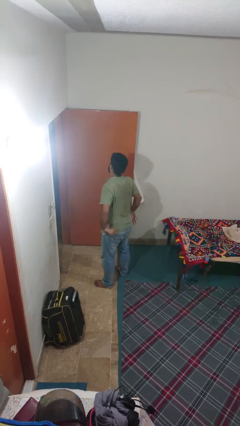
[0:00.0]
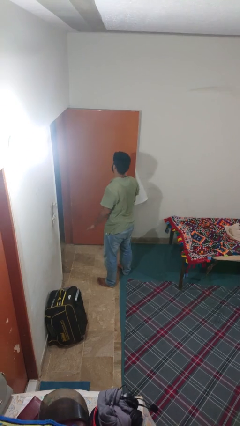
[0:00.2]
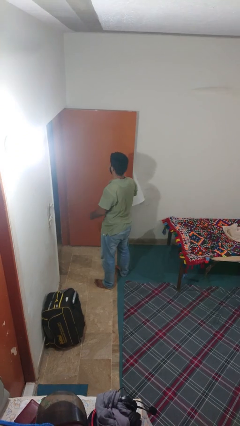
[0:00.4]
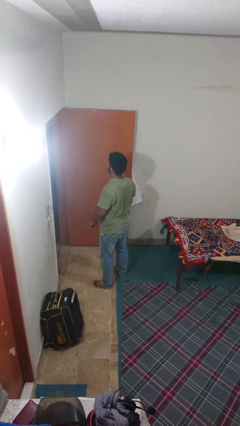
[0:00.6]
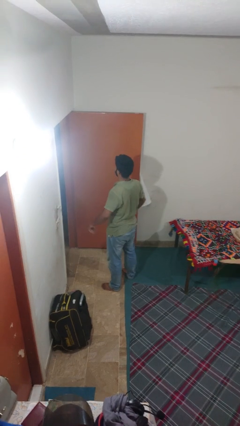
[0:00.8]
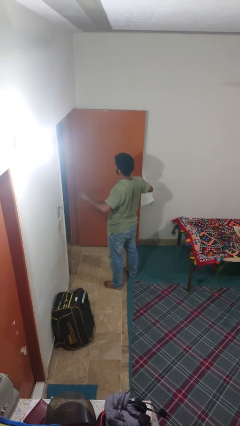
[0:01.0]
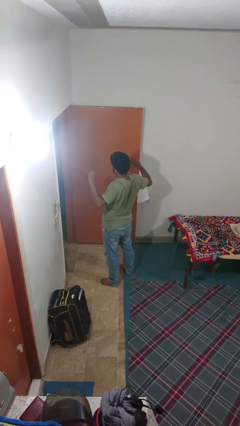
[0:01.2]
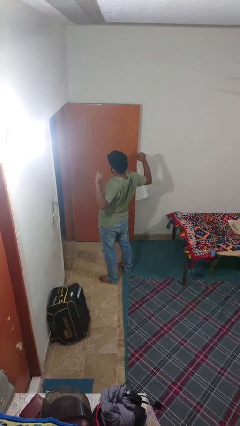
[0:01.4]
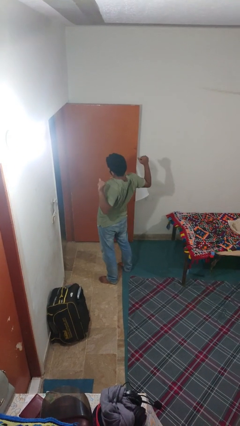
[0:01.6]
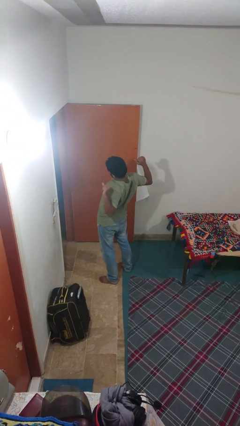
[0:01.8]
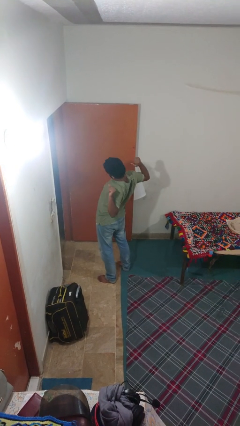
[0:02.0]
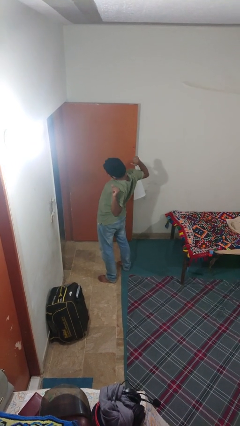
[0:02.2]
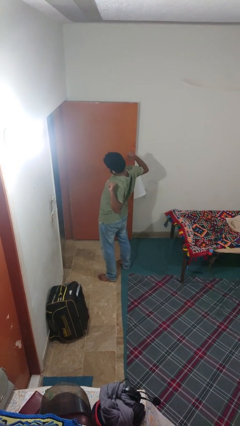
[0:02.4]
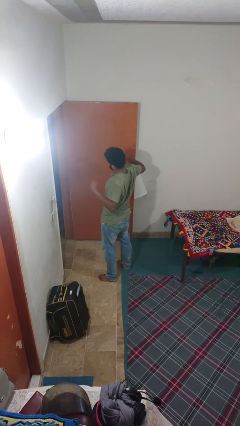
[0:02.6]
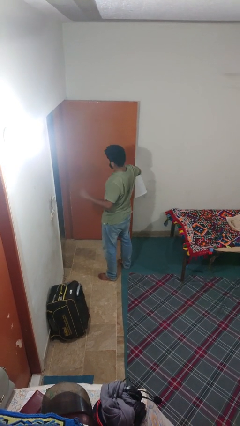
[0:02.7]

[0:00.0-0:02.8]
person stretches arms to side

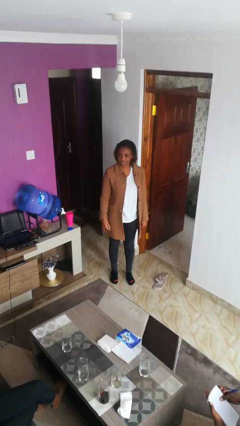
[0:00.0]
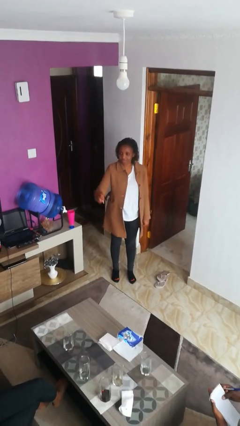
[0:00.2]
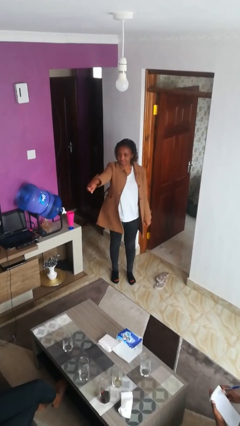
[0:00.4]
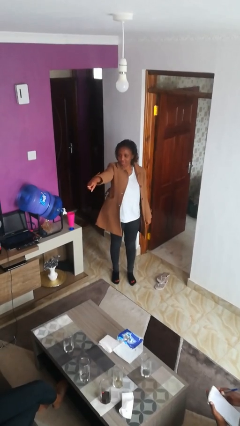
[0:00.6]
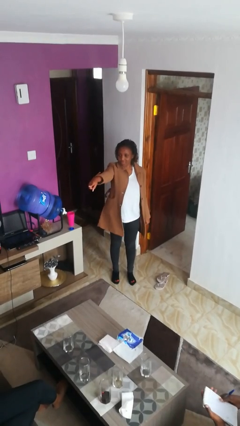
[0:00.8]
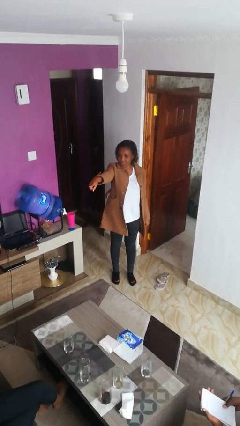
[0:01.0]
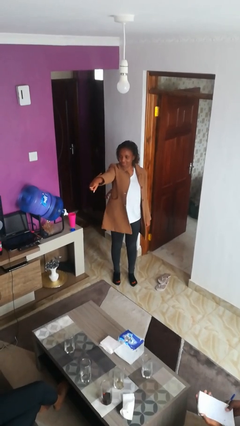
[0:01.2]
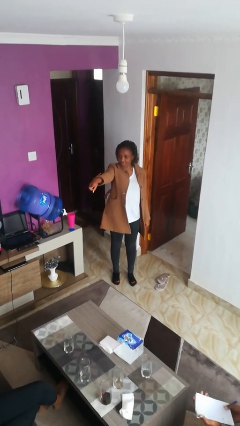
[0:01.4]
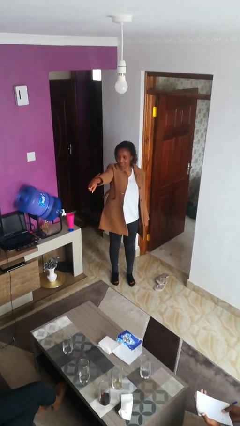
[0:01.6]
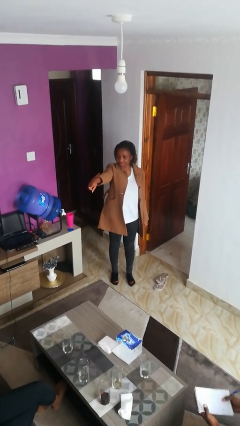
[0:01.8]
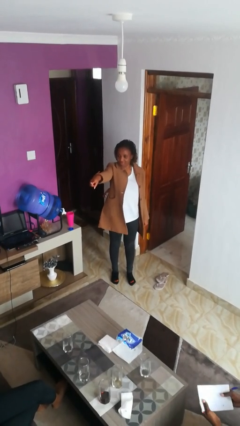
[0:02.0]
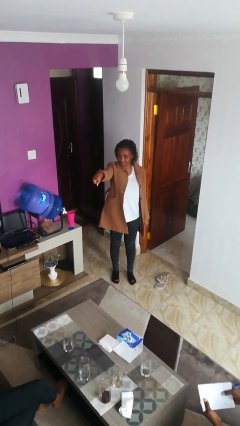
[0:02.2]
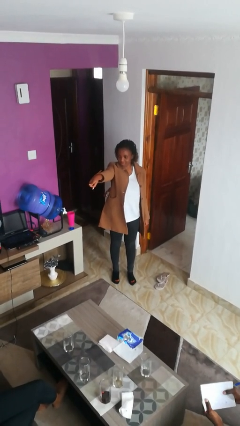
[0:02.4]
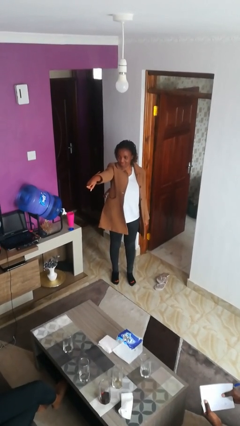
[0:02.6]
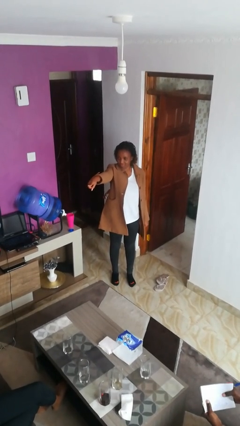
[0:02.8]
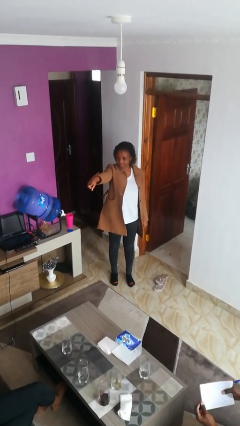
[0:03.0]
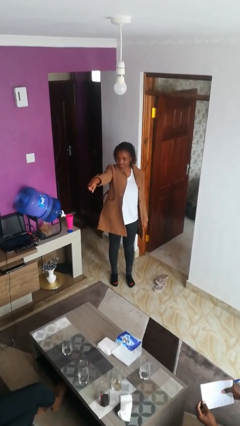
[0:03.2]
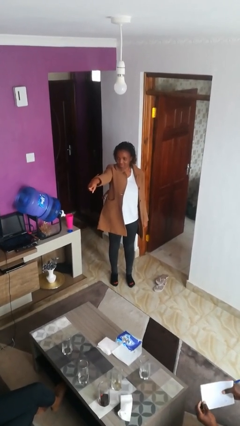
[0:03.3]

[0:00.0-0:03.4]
person points at person

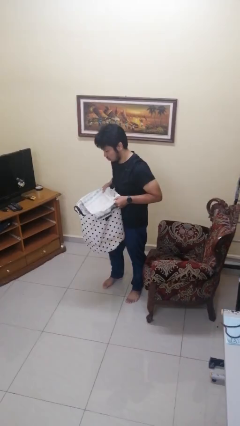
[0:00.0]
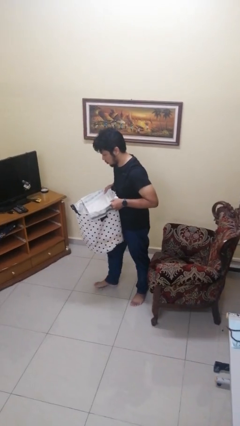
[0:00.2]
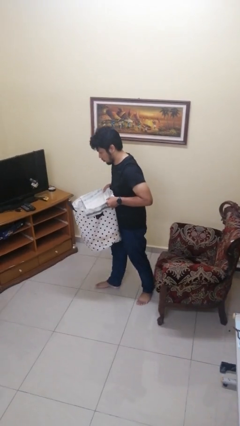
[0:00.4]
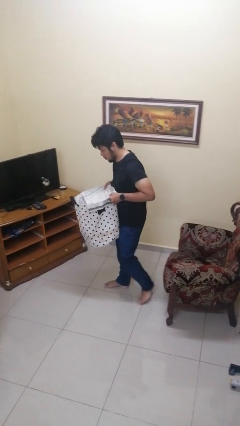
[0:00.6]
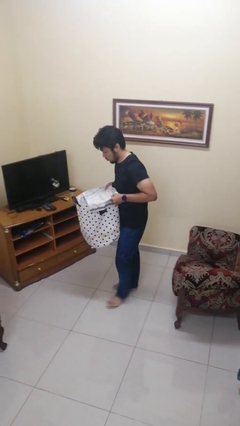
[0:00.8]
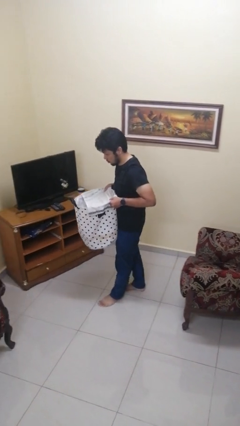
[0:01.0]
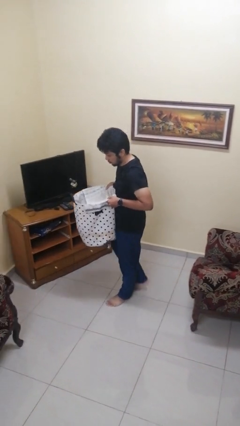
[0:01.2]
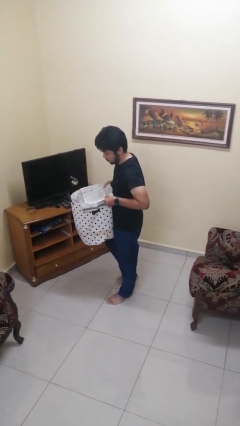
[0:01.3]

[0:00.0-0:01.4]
person carries laundry basket

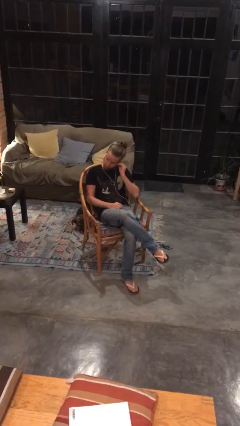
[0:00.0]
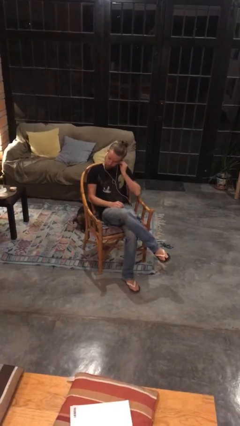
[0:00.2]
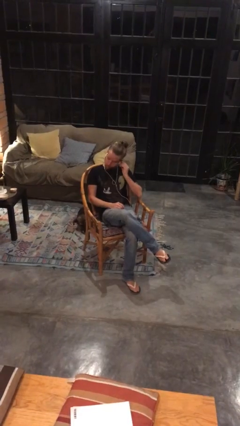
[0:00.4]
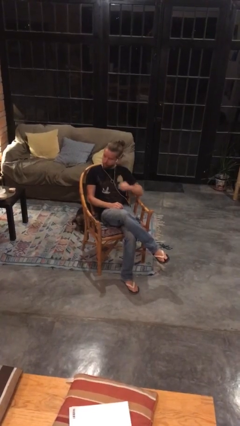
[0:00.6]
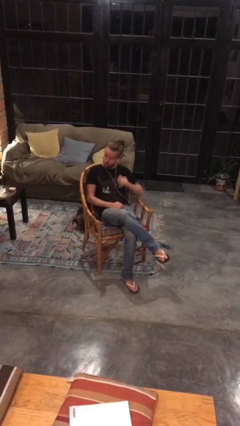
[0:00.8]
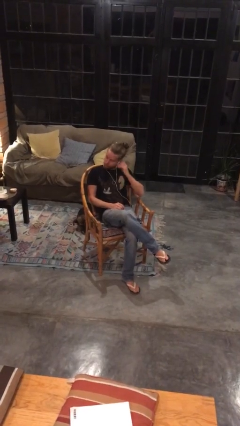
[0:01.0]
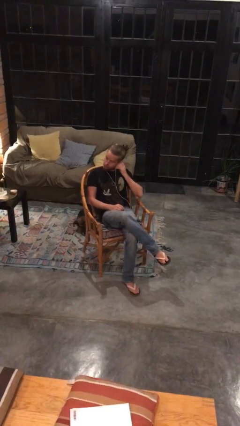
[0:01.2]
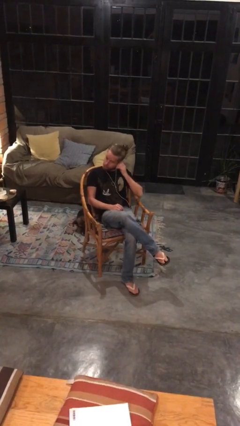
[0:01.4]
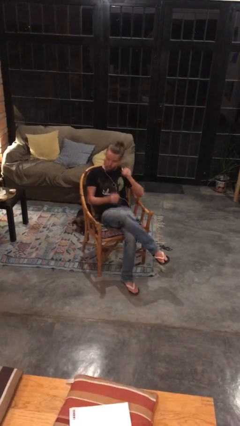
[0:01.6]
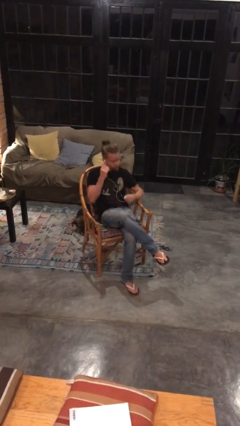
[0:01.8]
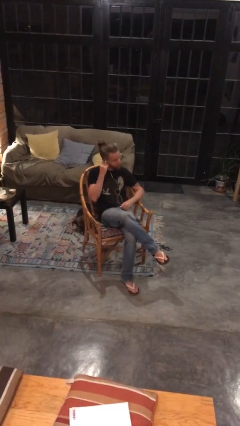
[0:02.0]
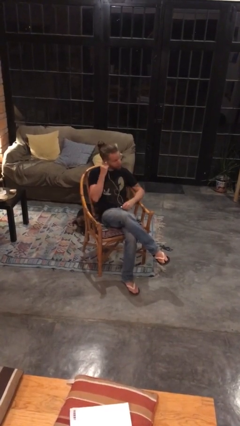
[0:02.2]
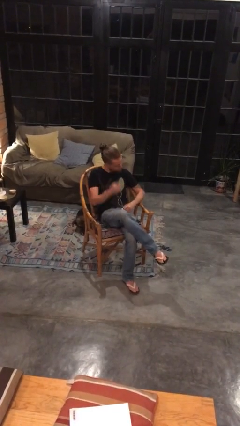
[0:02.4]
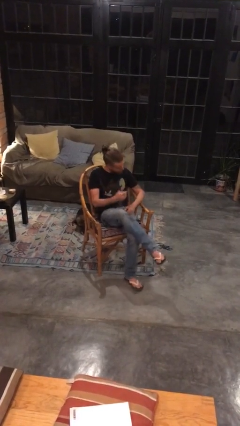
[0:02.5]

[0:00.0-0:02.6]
person takes off headphones

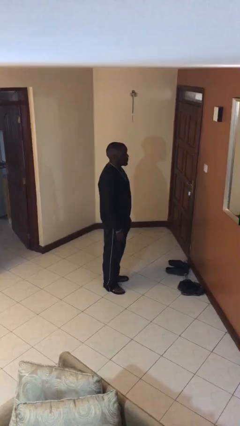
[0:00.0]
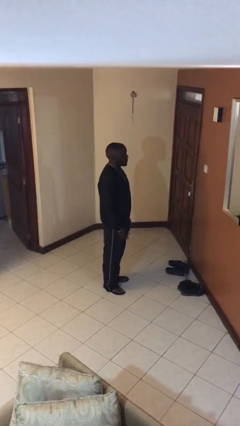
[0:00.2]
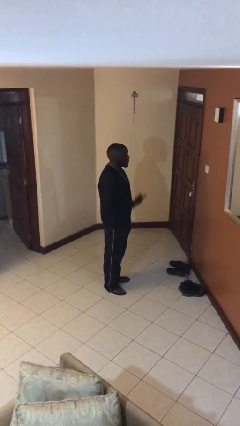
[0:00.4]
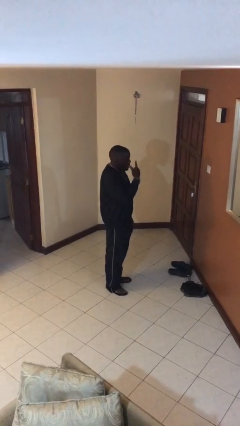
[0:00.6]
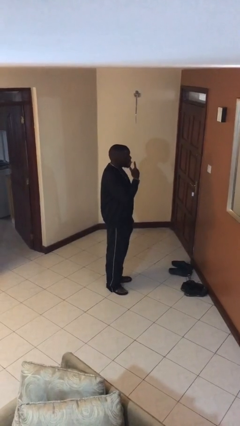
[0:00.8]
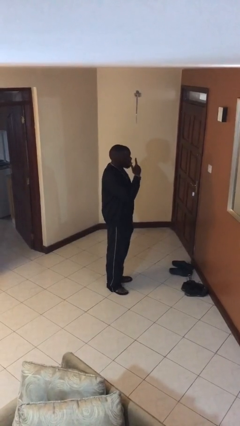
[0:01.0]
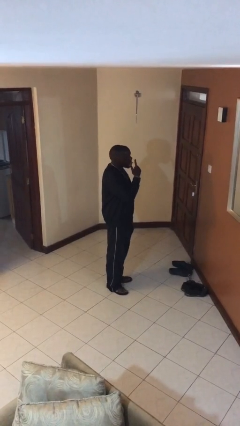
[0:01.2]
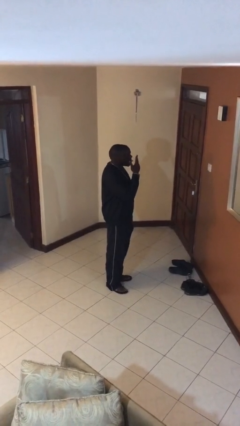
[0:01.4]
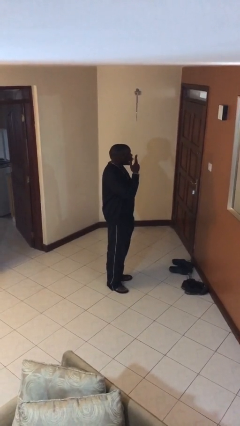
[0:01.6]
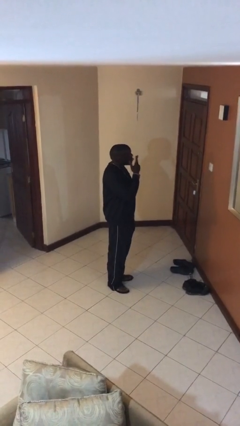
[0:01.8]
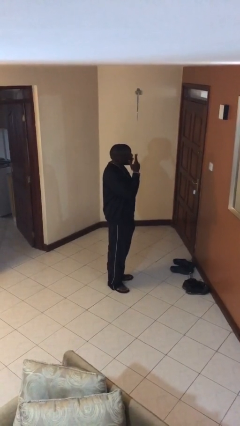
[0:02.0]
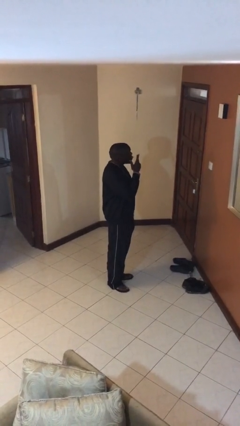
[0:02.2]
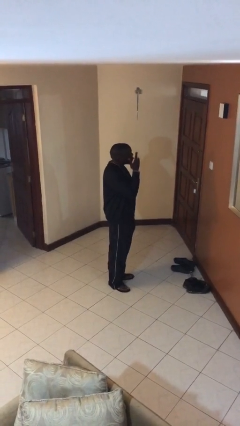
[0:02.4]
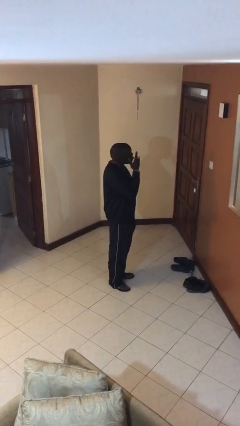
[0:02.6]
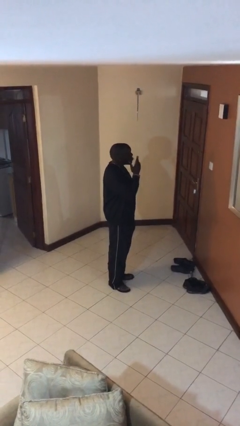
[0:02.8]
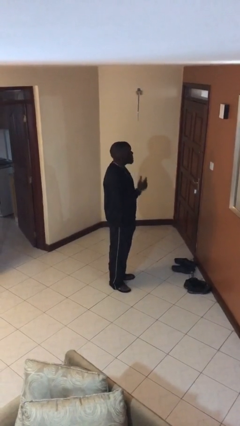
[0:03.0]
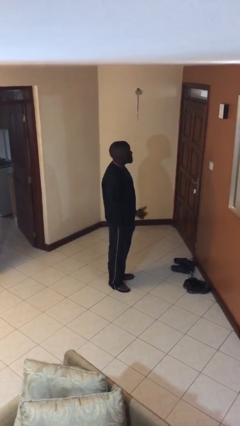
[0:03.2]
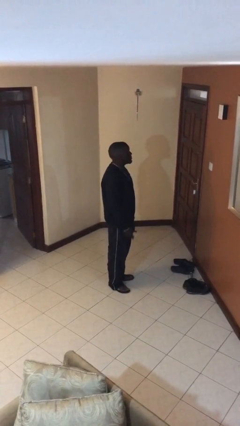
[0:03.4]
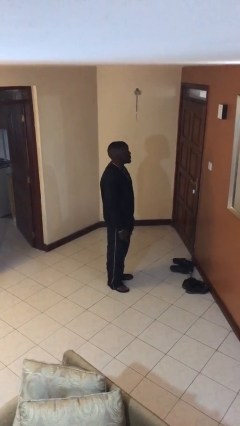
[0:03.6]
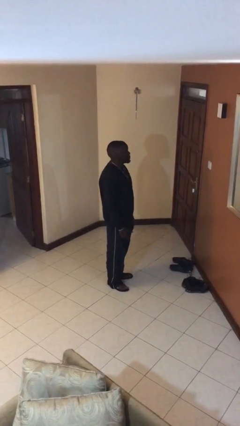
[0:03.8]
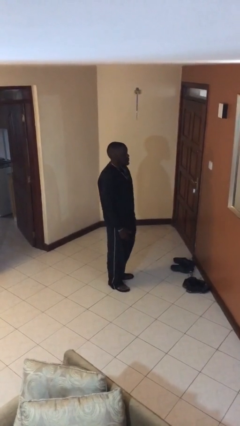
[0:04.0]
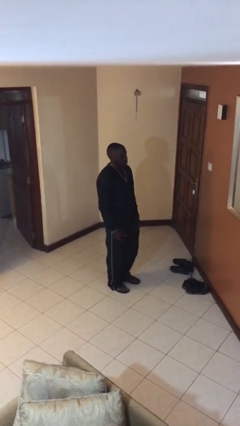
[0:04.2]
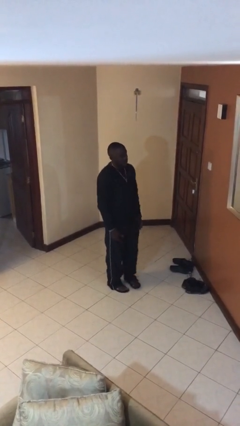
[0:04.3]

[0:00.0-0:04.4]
person licks fingers

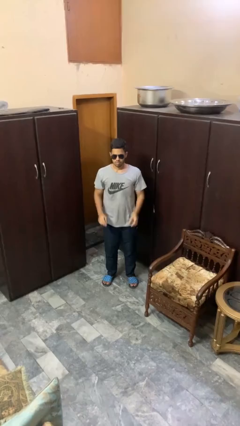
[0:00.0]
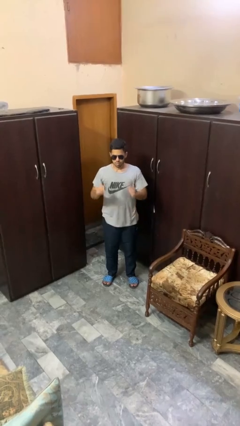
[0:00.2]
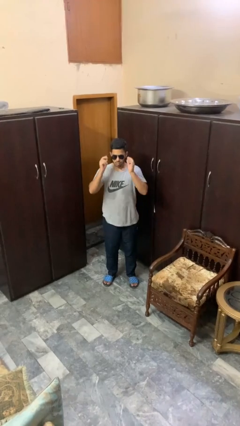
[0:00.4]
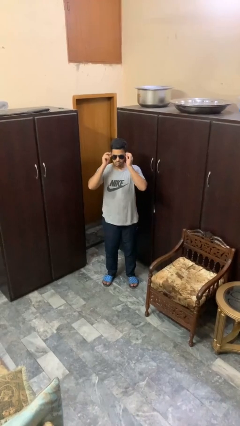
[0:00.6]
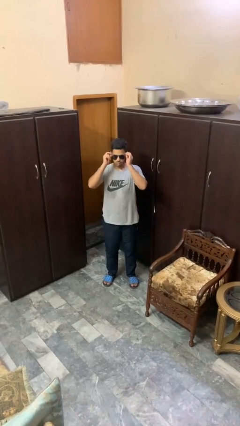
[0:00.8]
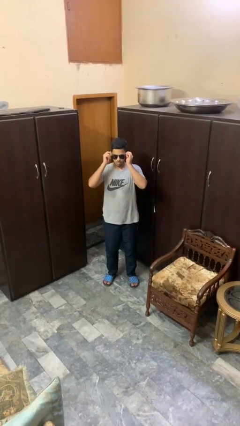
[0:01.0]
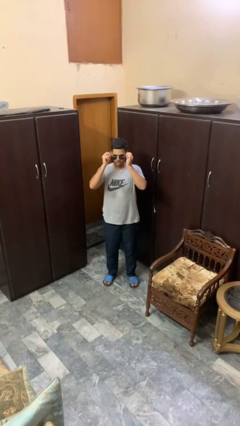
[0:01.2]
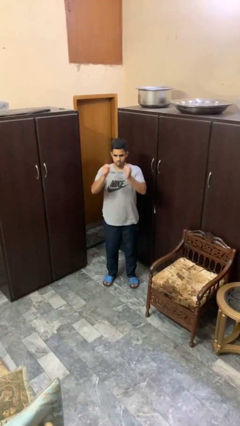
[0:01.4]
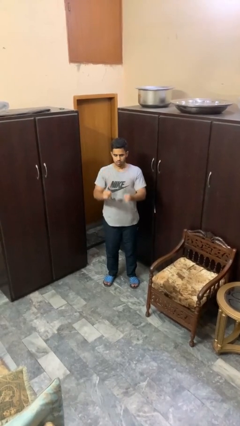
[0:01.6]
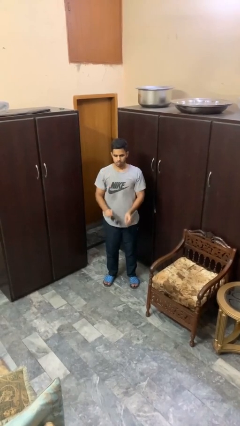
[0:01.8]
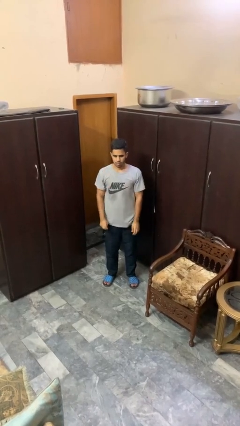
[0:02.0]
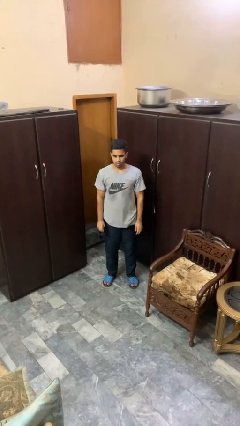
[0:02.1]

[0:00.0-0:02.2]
person takes off sunglasses

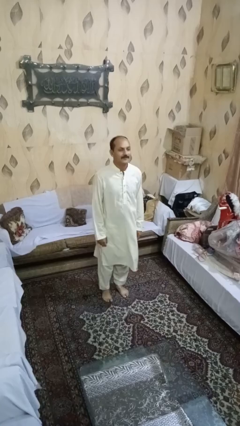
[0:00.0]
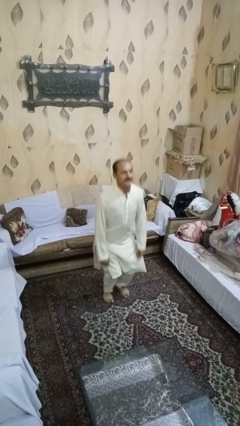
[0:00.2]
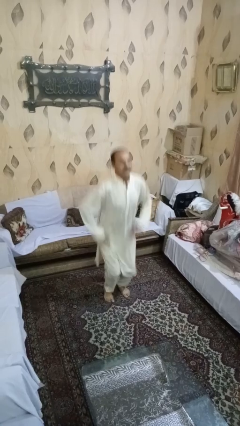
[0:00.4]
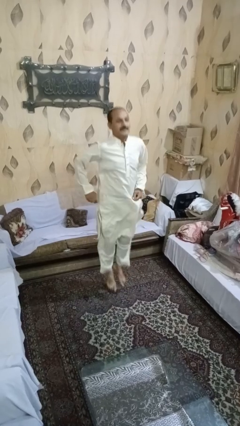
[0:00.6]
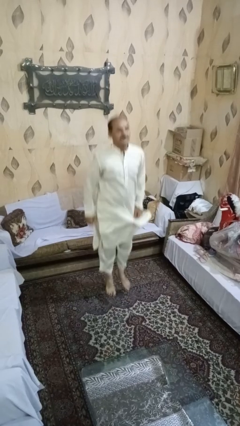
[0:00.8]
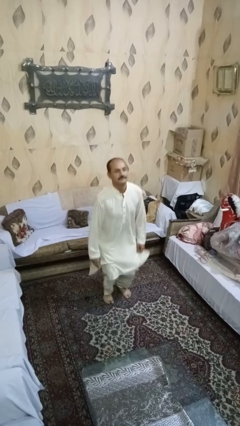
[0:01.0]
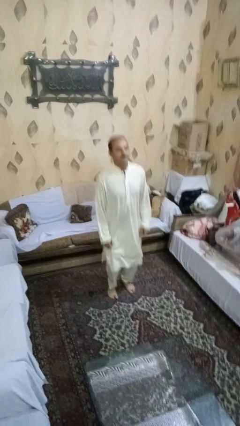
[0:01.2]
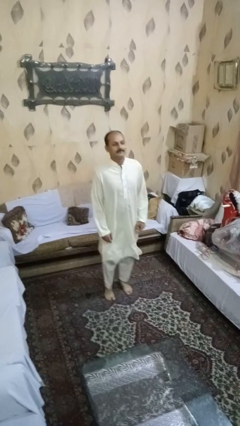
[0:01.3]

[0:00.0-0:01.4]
person jumps
